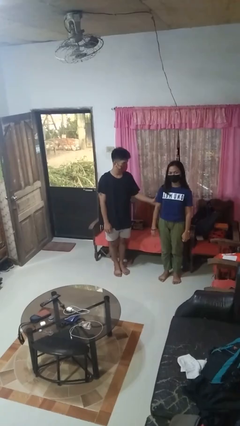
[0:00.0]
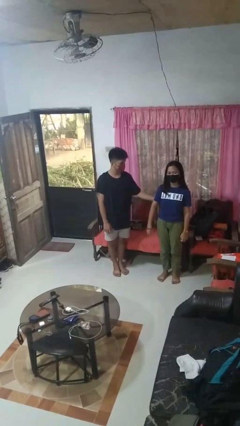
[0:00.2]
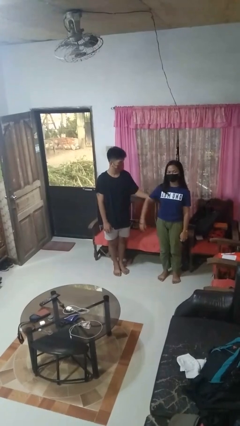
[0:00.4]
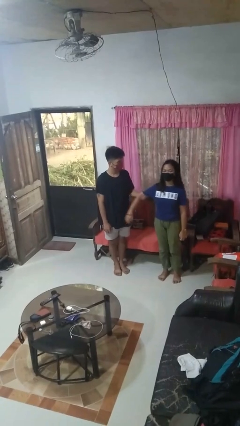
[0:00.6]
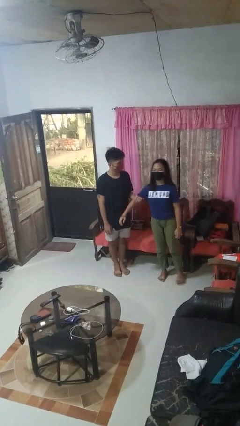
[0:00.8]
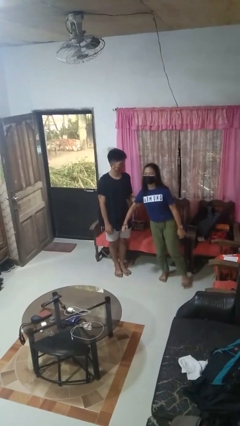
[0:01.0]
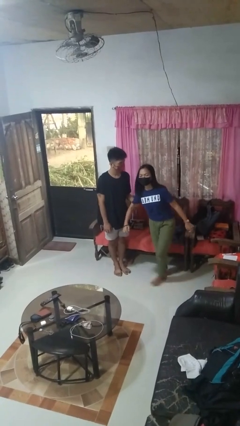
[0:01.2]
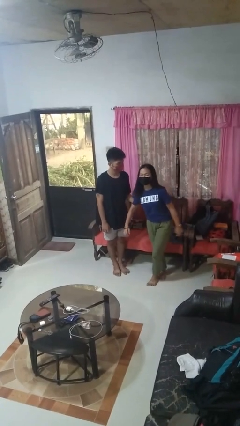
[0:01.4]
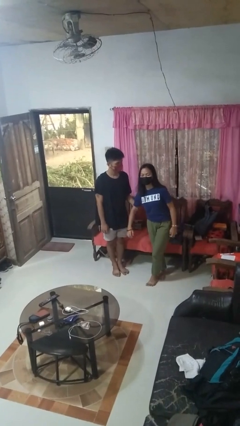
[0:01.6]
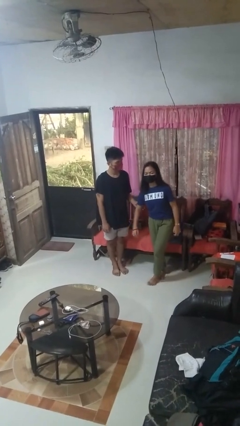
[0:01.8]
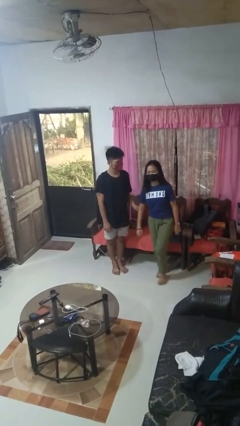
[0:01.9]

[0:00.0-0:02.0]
person grabs person by bicep

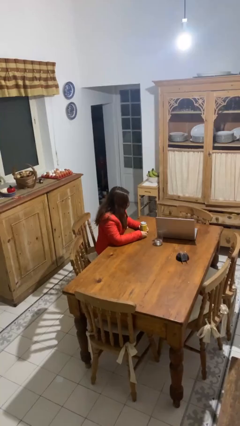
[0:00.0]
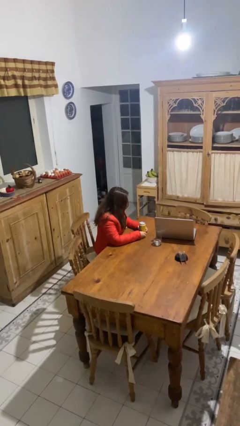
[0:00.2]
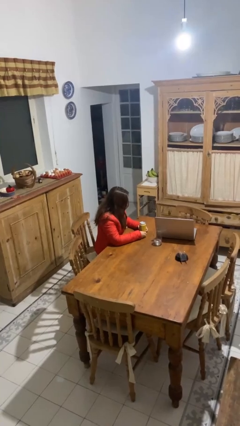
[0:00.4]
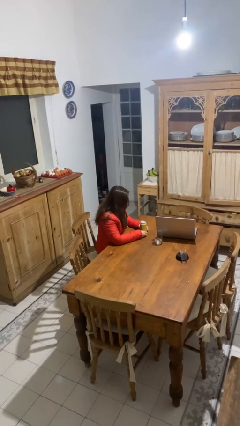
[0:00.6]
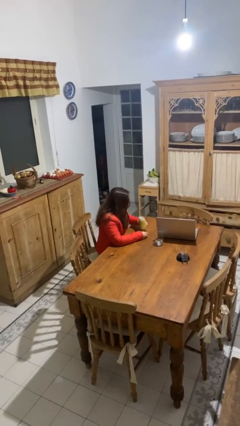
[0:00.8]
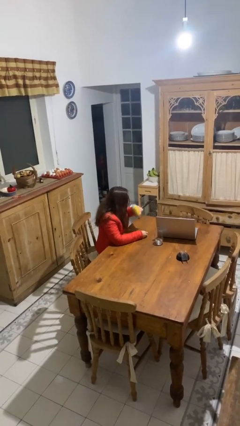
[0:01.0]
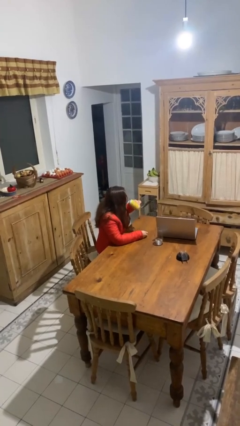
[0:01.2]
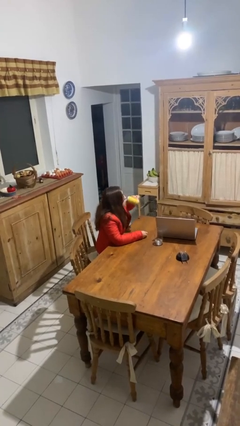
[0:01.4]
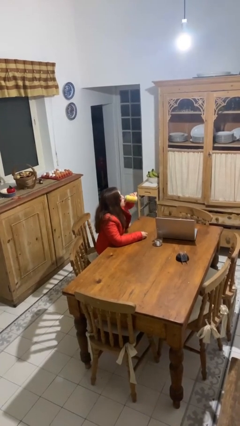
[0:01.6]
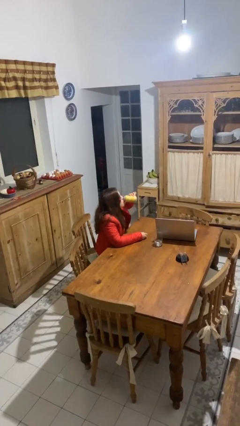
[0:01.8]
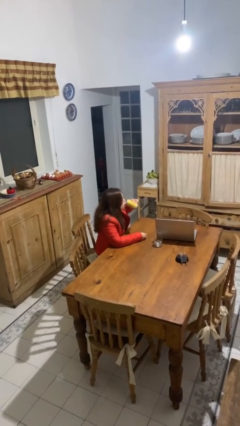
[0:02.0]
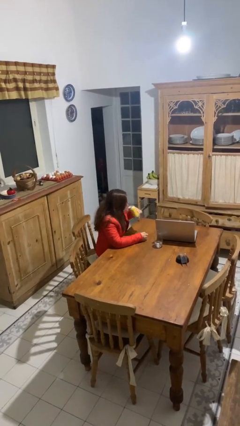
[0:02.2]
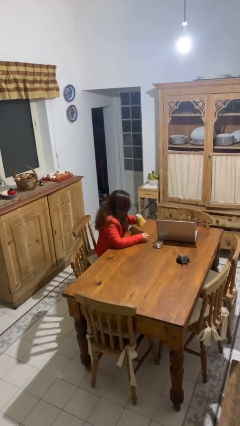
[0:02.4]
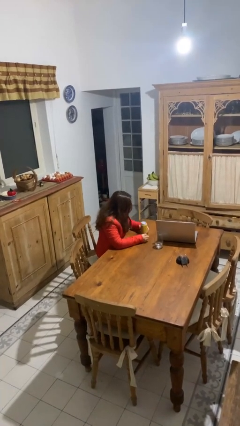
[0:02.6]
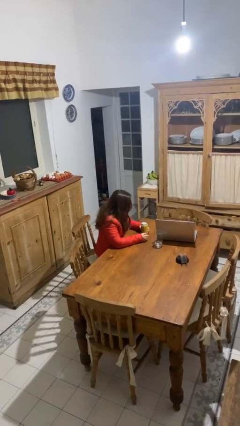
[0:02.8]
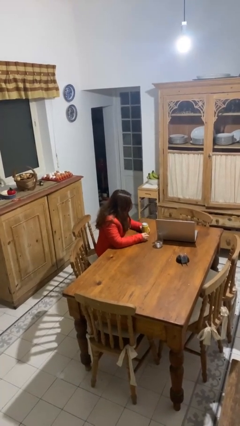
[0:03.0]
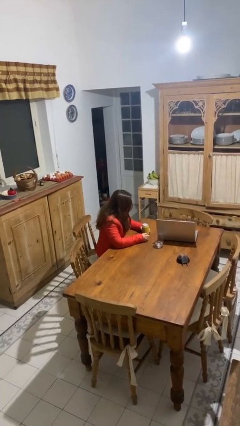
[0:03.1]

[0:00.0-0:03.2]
person drinks from beverage can

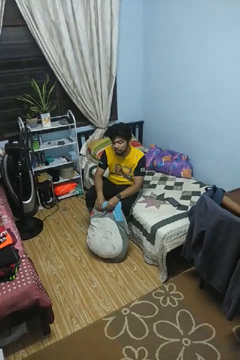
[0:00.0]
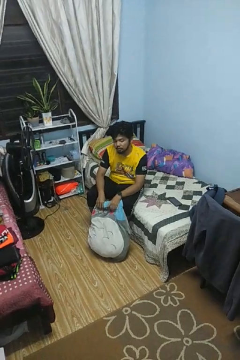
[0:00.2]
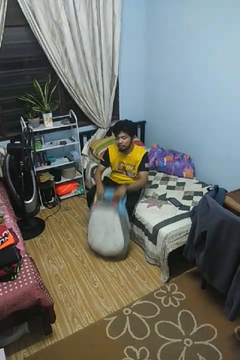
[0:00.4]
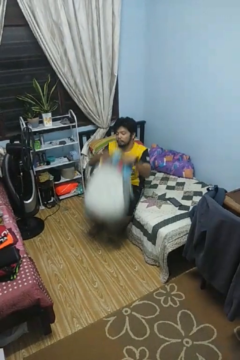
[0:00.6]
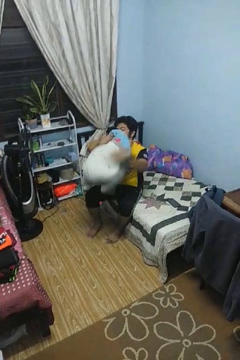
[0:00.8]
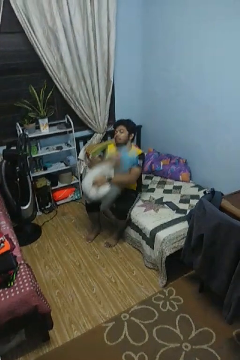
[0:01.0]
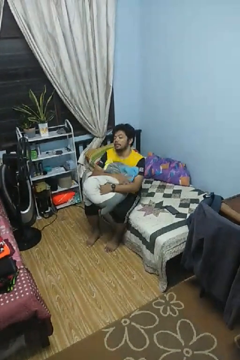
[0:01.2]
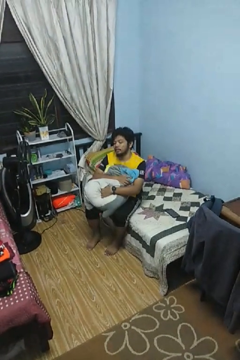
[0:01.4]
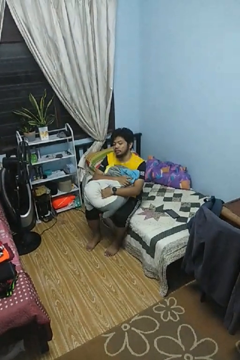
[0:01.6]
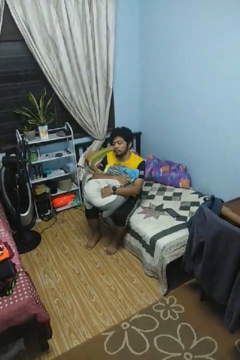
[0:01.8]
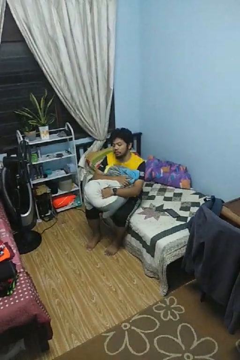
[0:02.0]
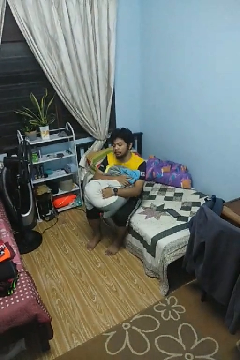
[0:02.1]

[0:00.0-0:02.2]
person hugs stuffed animal

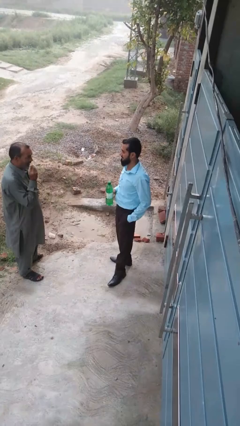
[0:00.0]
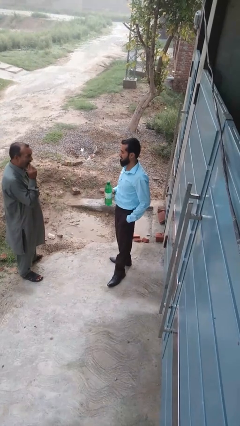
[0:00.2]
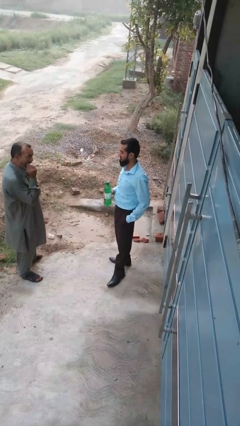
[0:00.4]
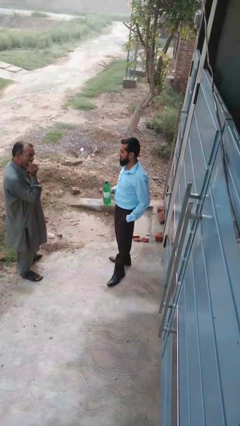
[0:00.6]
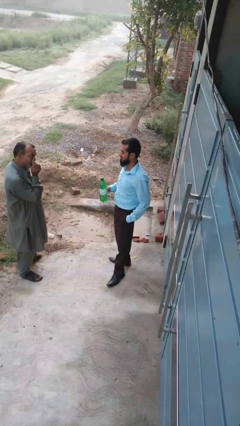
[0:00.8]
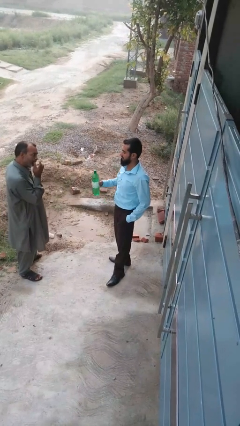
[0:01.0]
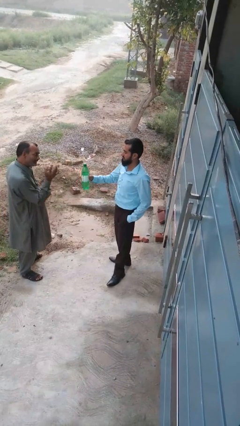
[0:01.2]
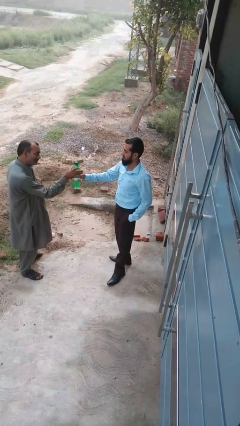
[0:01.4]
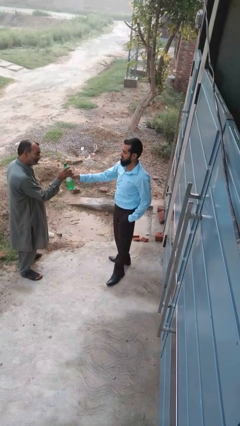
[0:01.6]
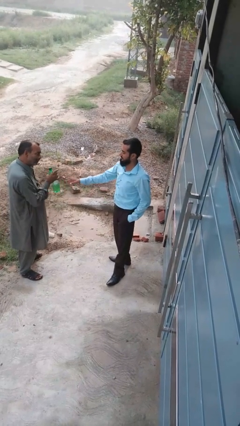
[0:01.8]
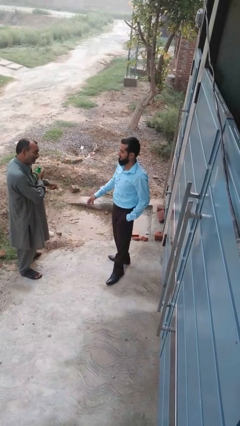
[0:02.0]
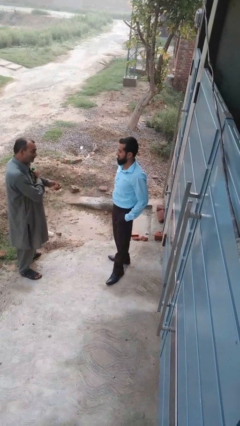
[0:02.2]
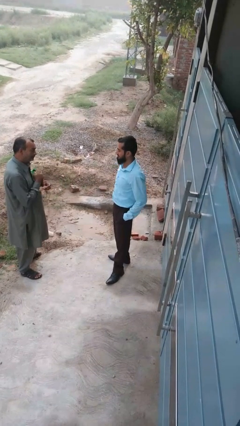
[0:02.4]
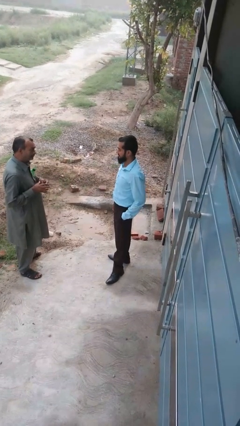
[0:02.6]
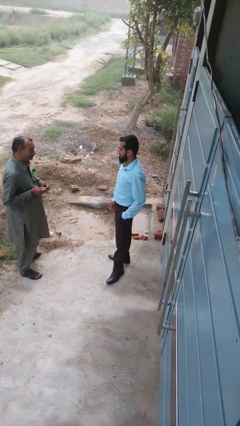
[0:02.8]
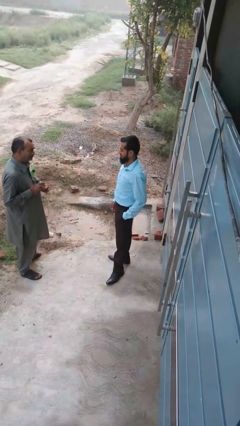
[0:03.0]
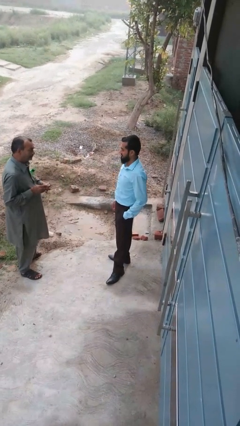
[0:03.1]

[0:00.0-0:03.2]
person transfers object to person

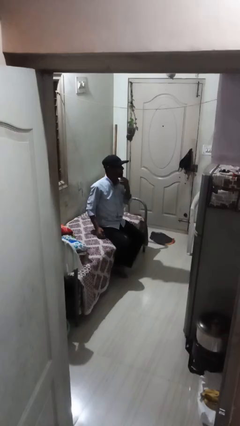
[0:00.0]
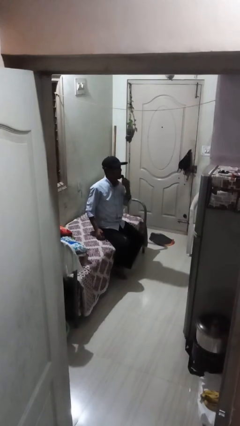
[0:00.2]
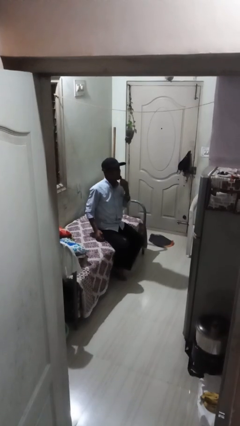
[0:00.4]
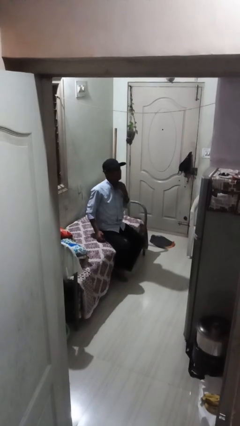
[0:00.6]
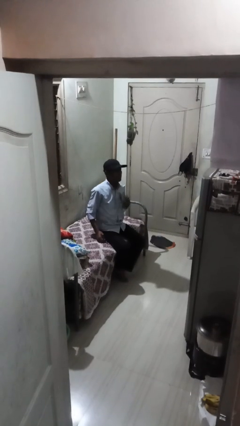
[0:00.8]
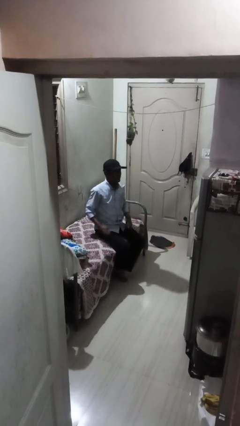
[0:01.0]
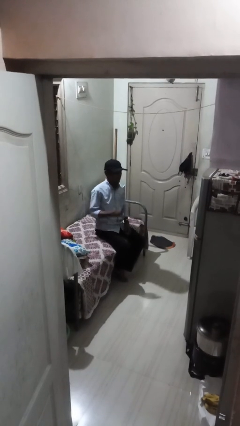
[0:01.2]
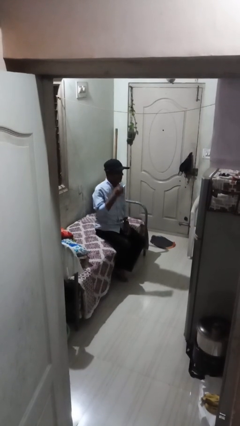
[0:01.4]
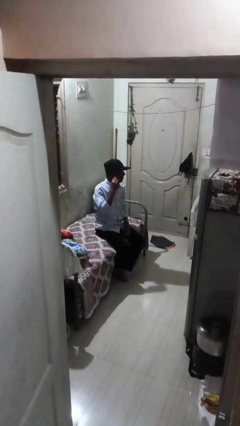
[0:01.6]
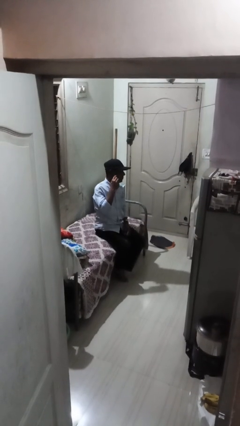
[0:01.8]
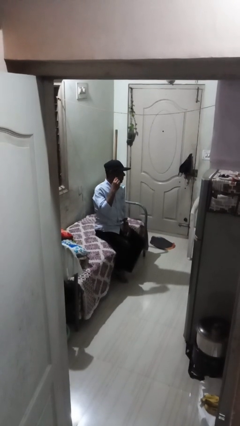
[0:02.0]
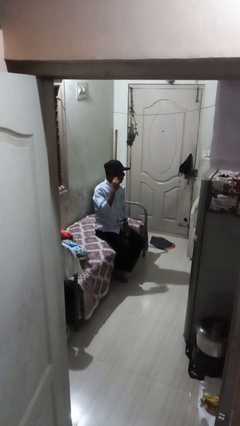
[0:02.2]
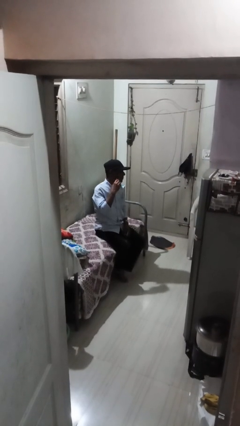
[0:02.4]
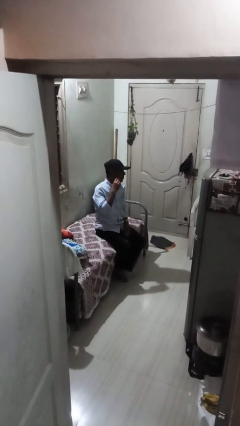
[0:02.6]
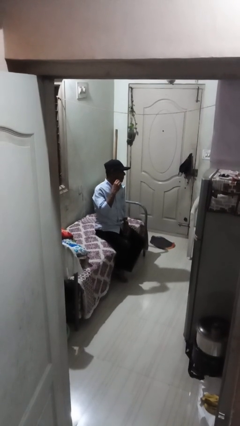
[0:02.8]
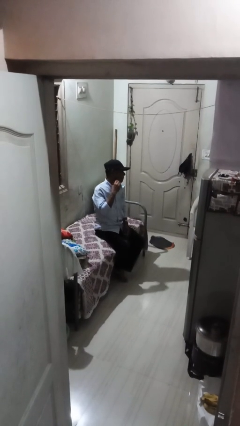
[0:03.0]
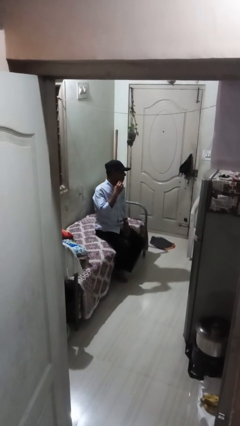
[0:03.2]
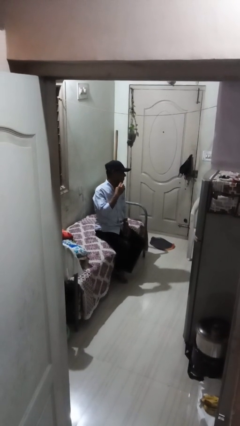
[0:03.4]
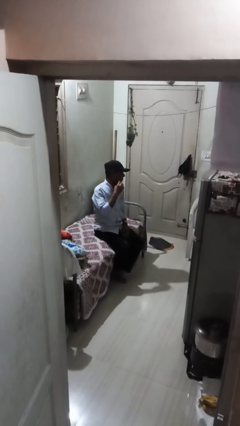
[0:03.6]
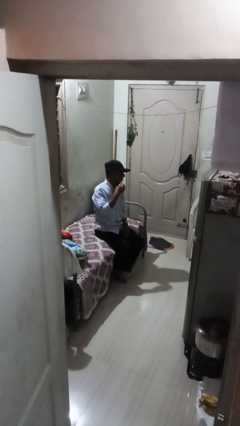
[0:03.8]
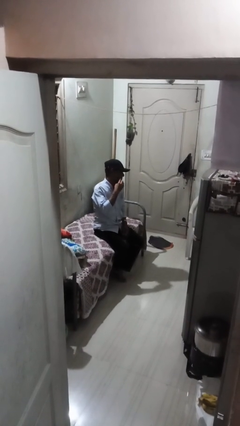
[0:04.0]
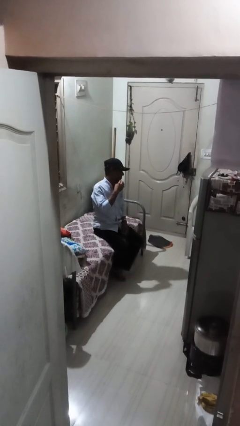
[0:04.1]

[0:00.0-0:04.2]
person shaves face

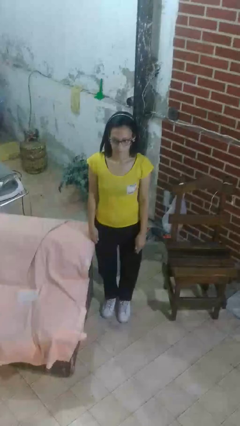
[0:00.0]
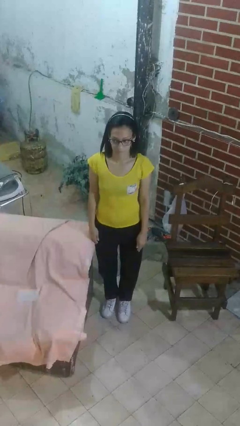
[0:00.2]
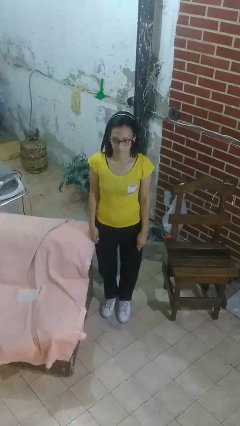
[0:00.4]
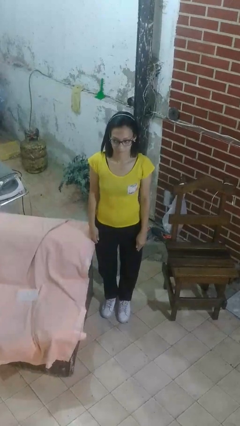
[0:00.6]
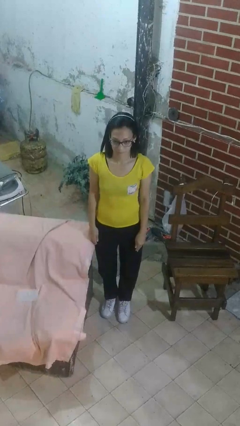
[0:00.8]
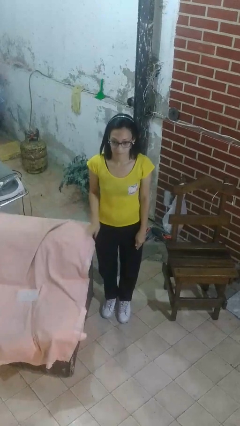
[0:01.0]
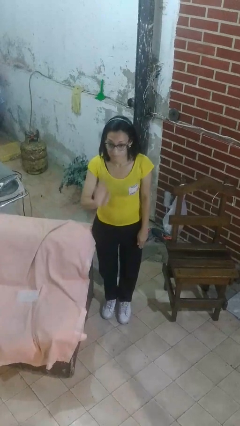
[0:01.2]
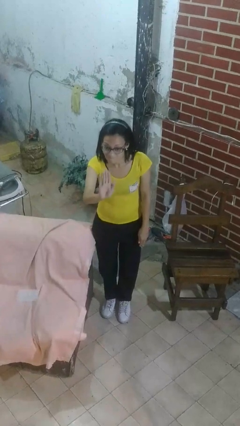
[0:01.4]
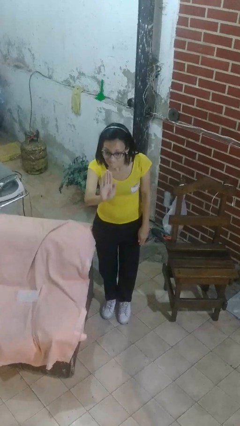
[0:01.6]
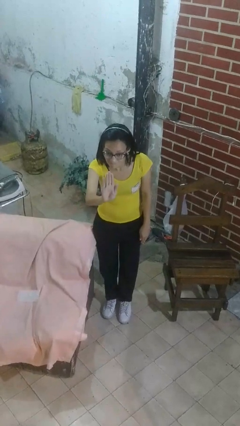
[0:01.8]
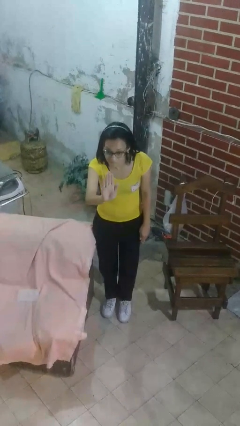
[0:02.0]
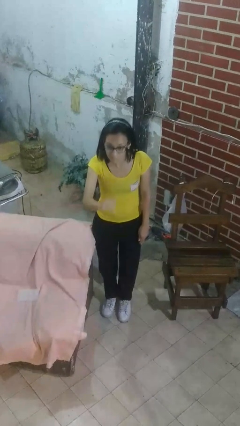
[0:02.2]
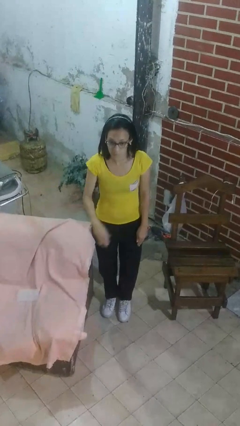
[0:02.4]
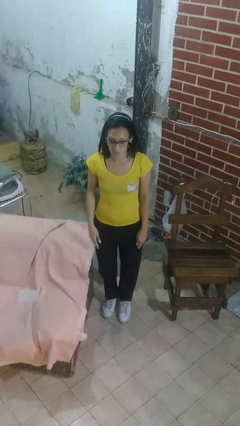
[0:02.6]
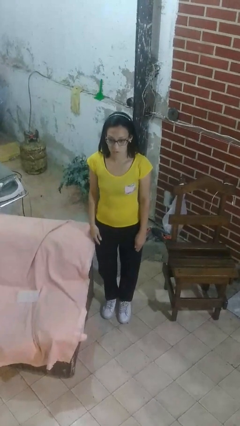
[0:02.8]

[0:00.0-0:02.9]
person gestures stop
